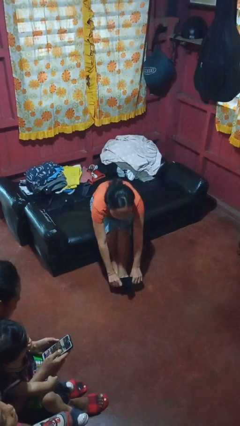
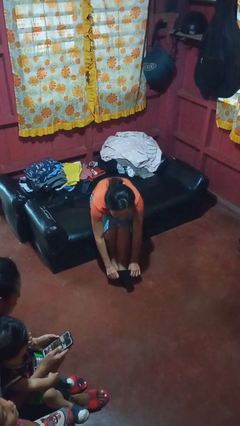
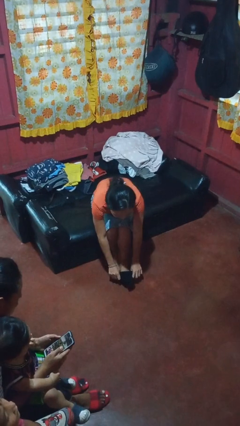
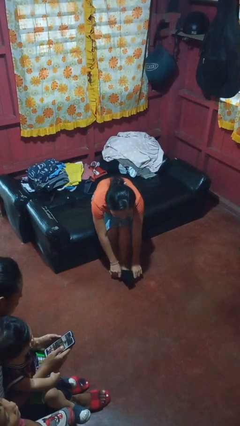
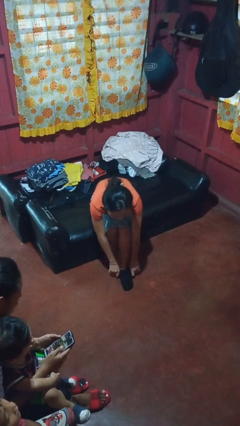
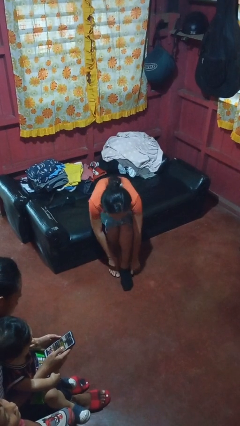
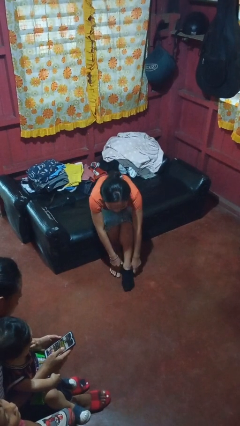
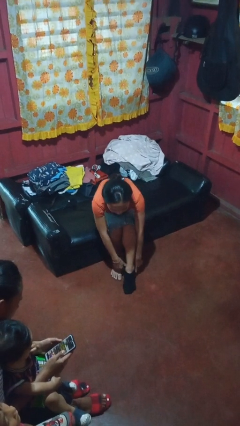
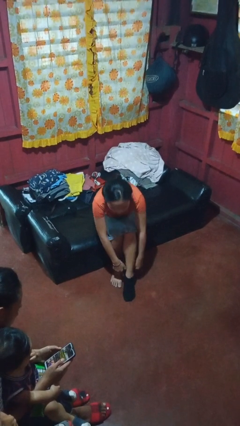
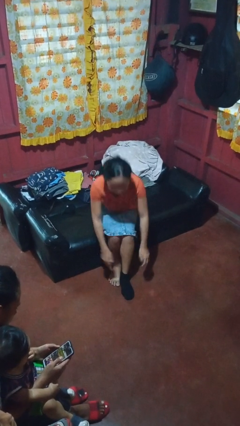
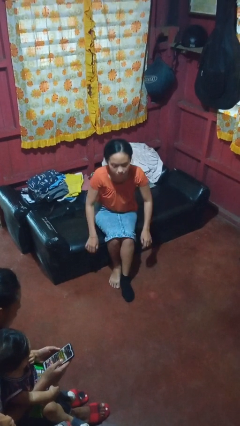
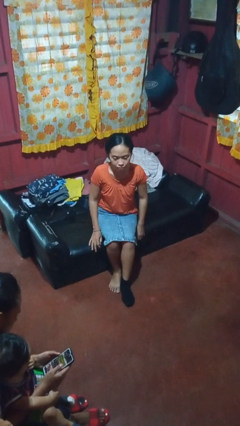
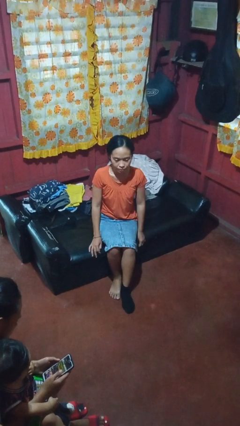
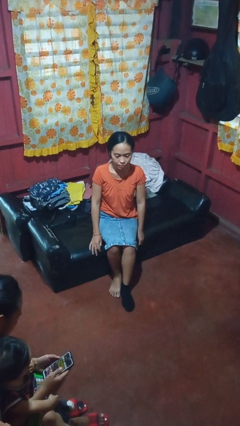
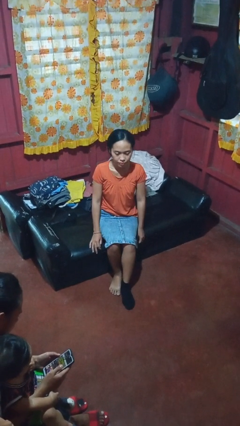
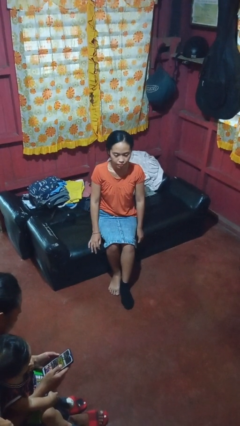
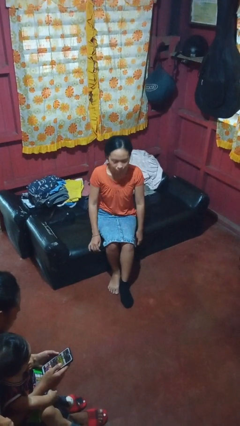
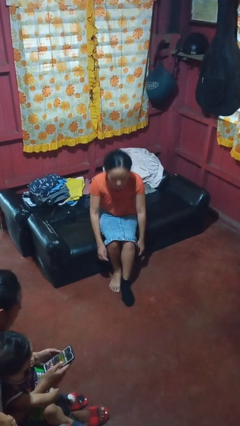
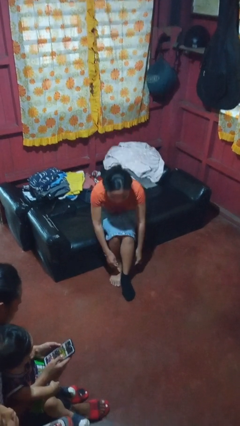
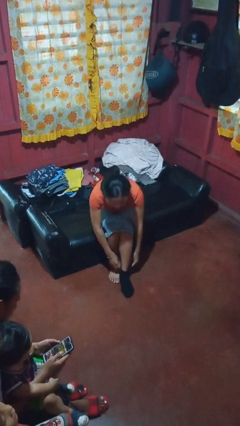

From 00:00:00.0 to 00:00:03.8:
person puts on socks

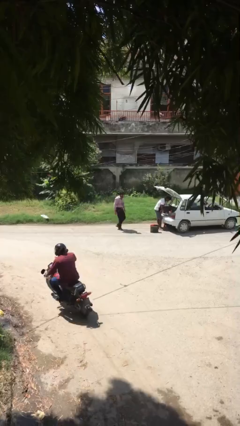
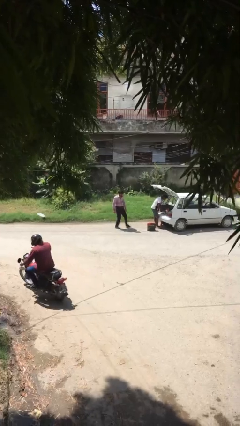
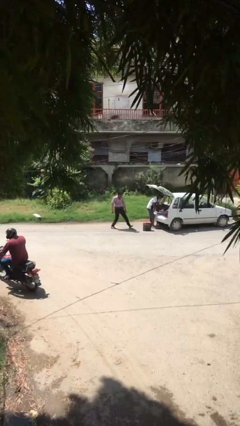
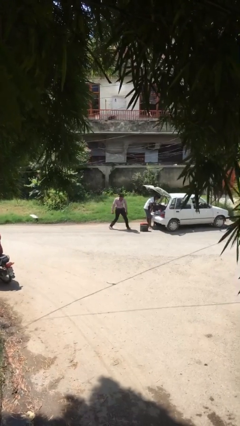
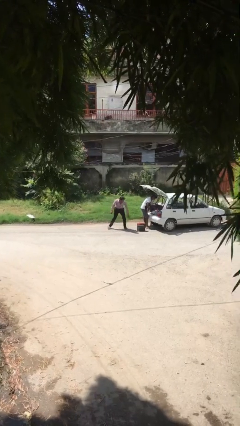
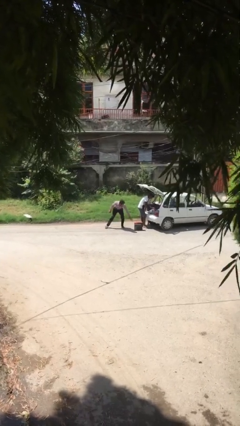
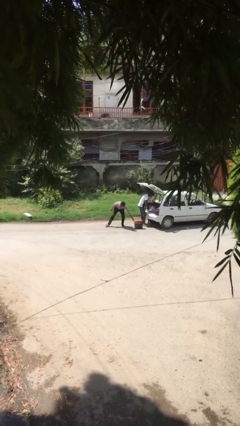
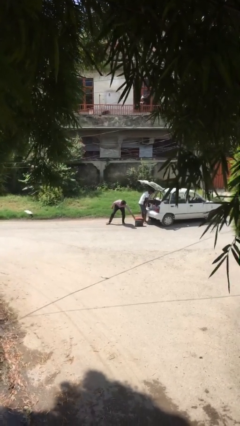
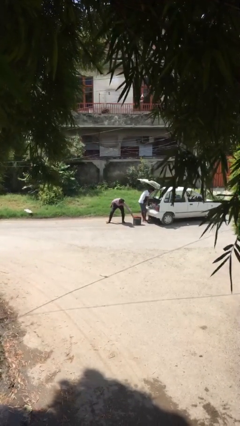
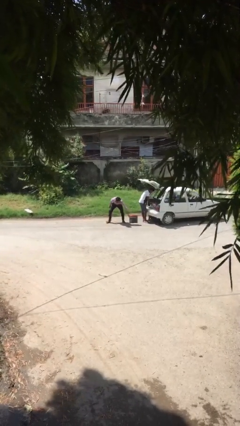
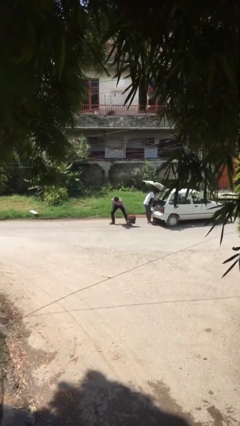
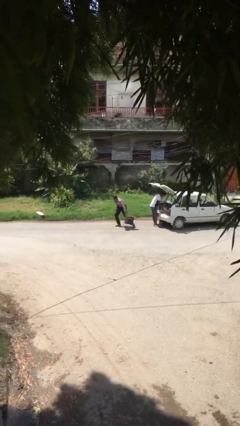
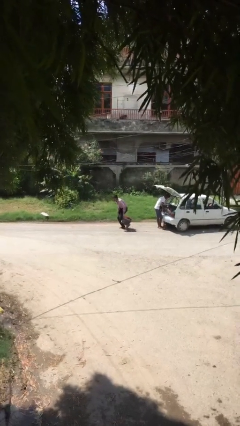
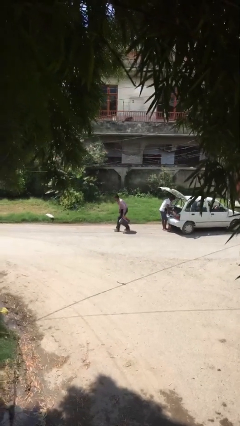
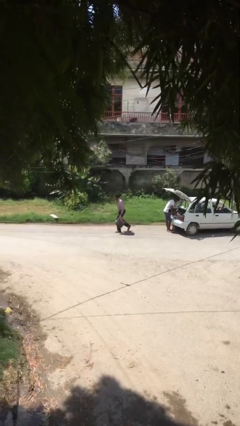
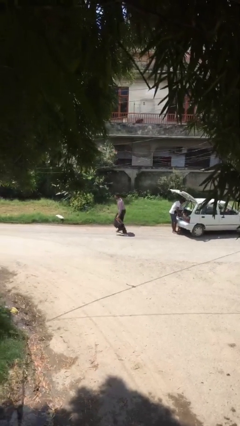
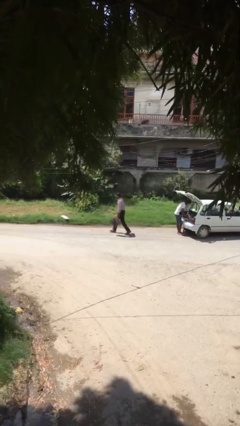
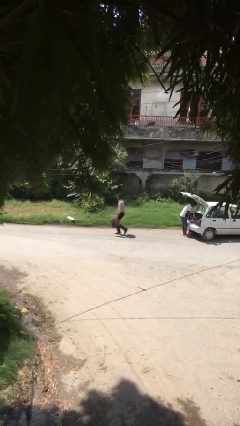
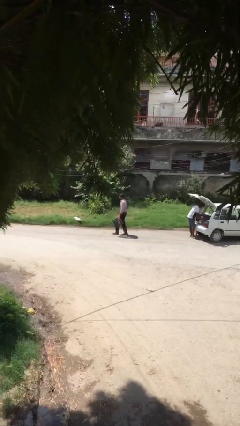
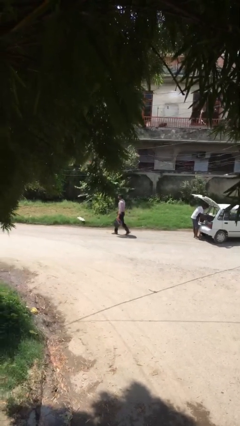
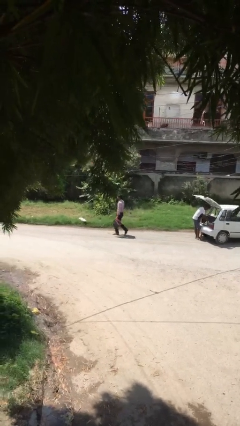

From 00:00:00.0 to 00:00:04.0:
person steals object from person

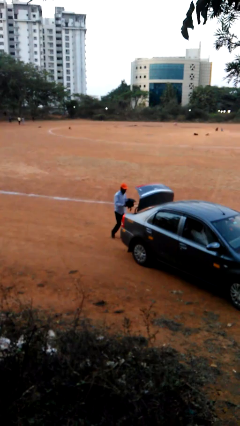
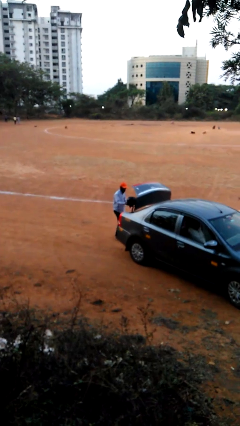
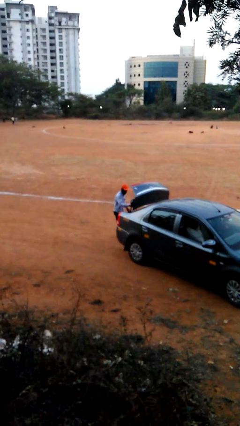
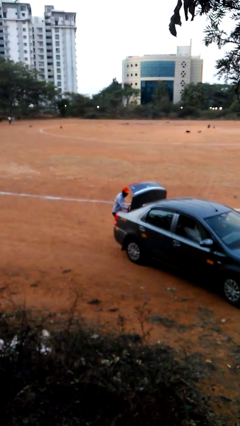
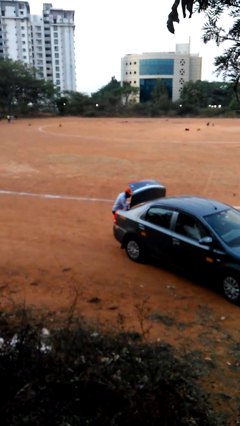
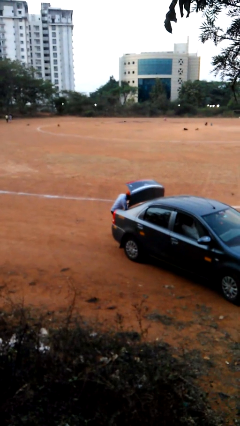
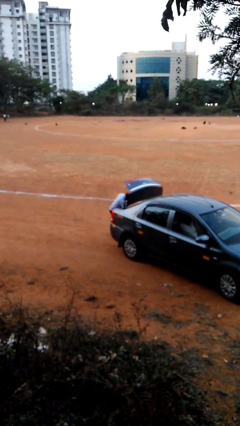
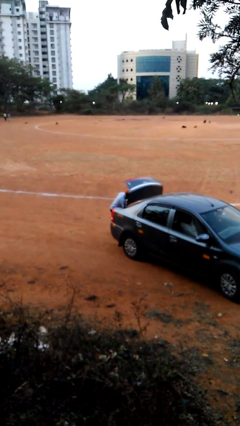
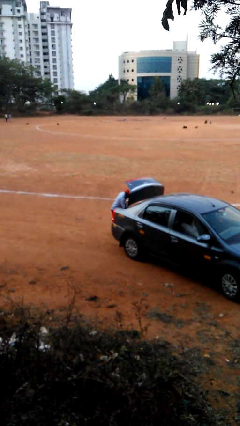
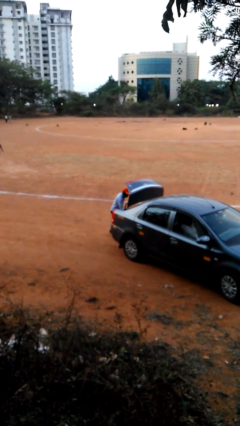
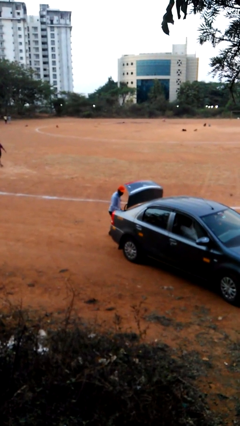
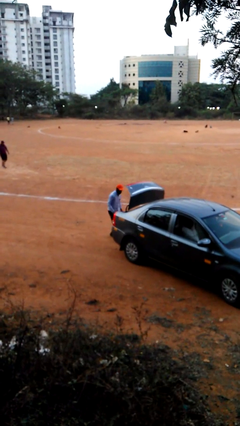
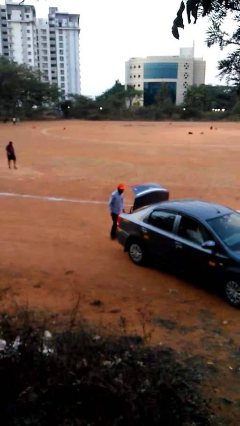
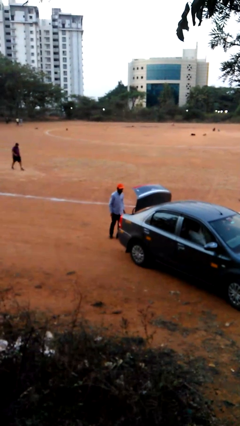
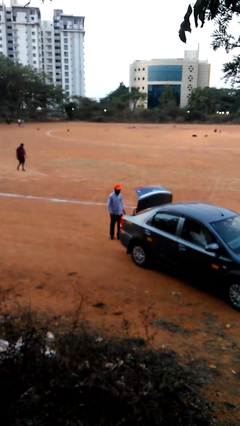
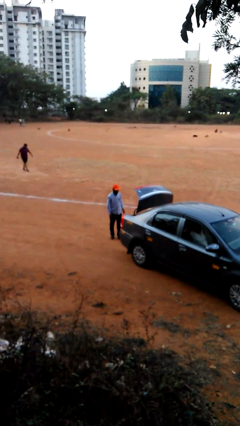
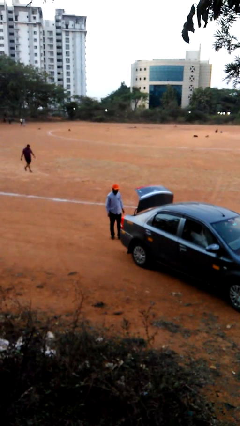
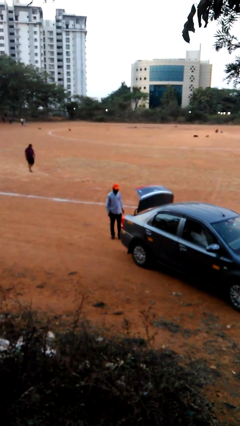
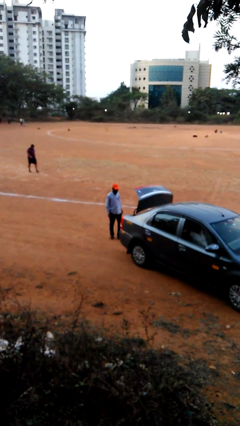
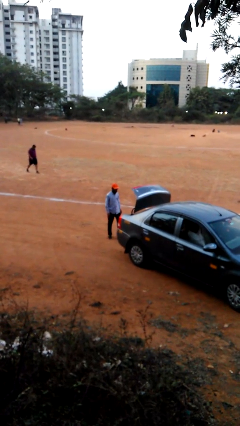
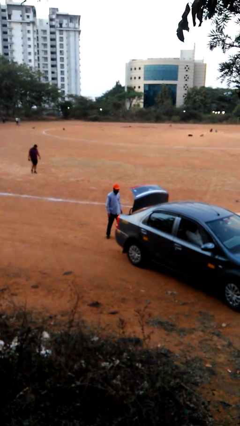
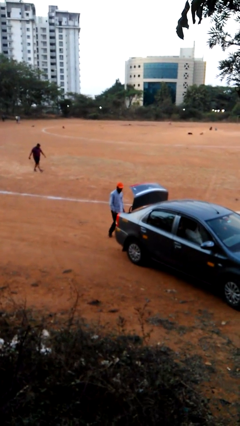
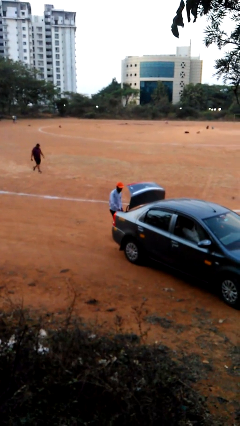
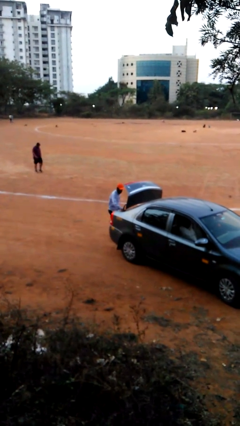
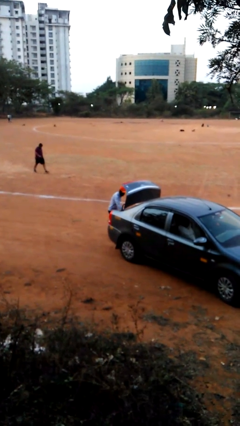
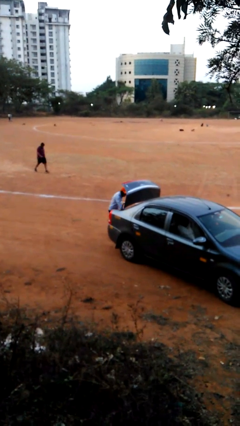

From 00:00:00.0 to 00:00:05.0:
person loads car

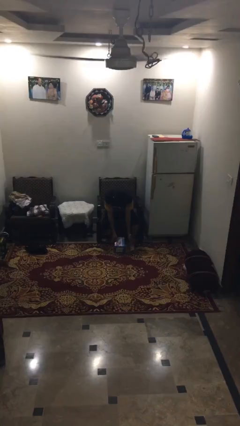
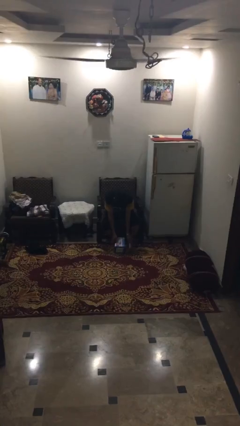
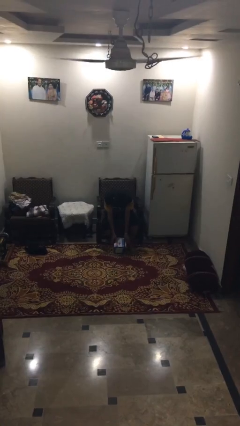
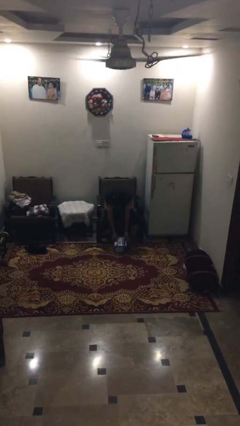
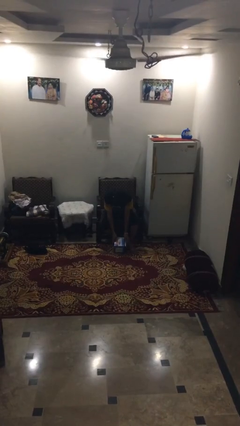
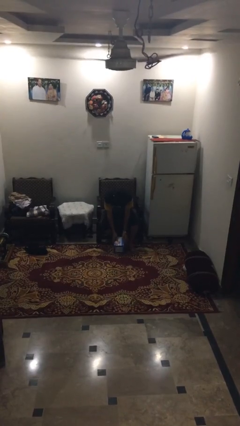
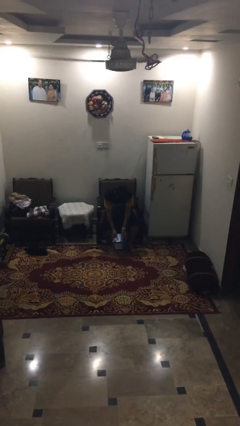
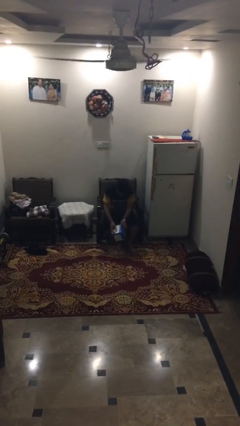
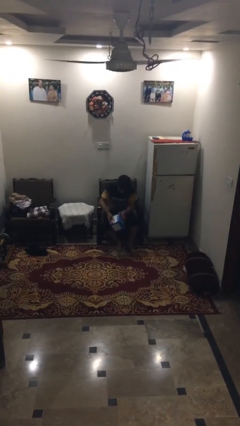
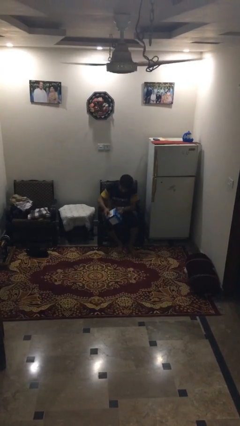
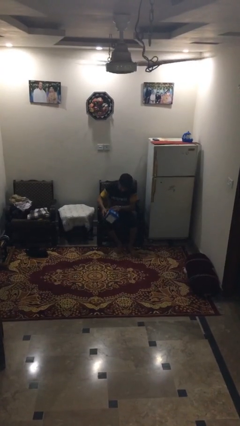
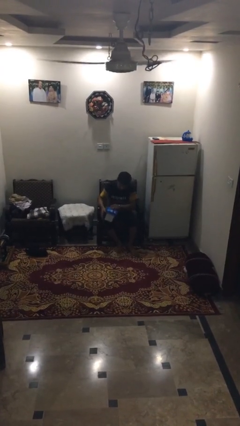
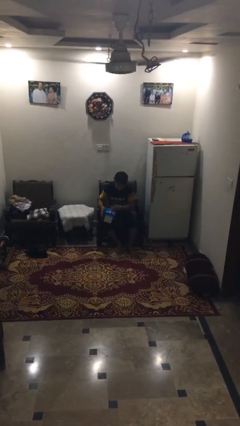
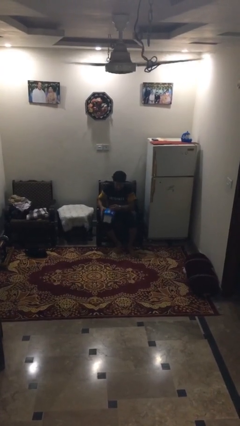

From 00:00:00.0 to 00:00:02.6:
person picks up object from floor

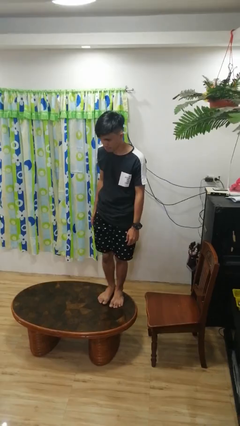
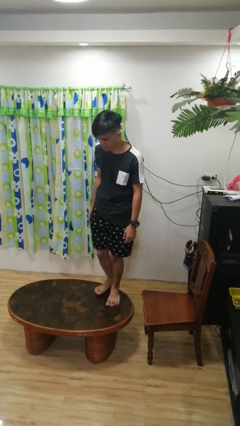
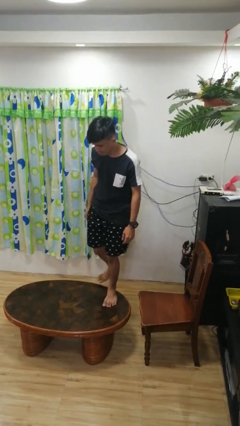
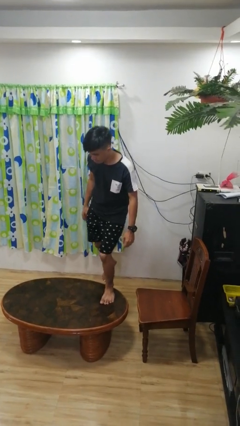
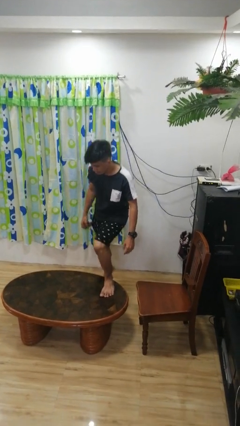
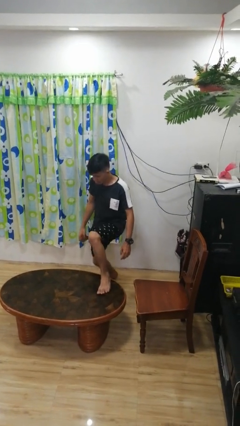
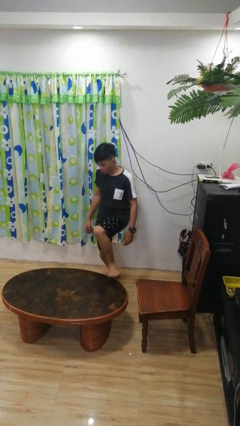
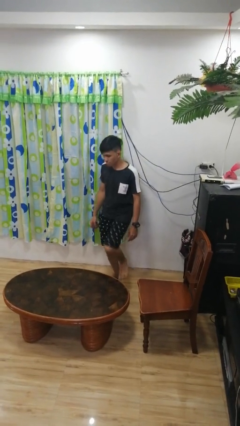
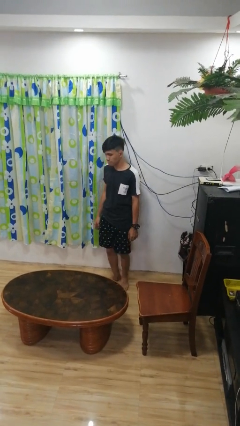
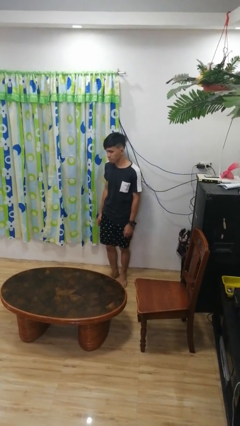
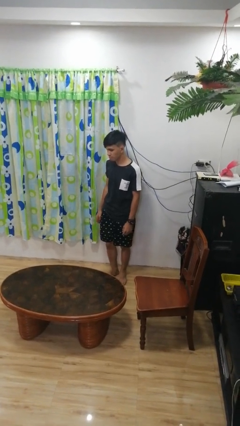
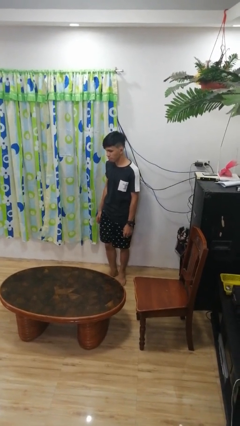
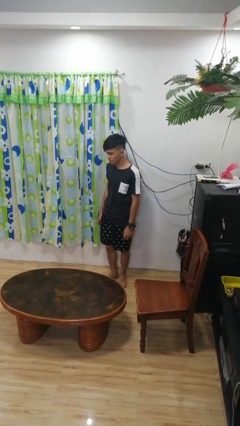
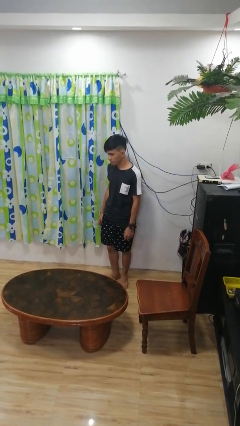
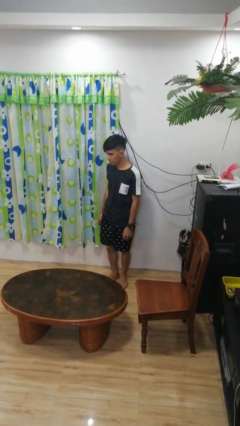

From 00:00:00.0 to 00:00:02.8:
person climbs off table
